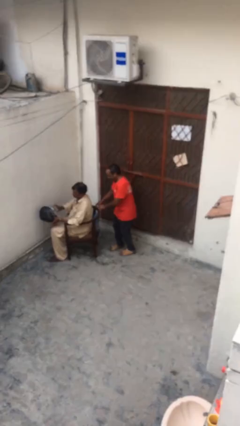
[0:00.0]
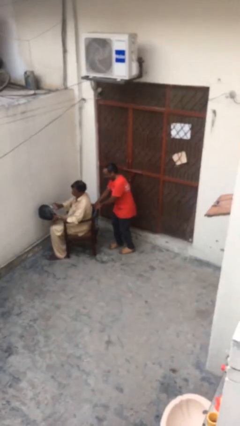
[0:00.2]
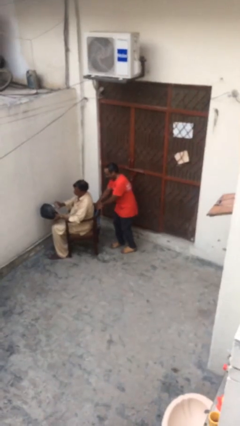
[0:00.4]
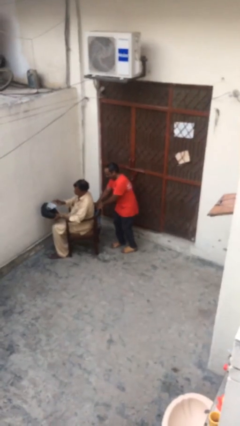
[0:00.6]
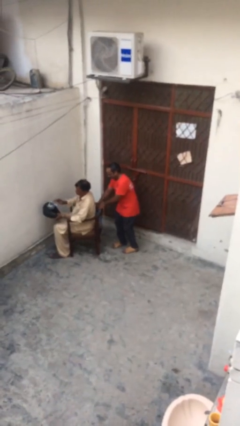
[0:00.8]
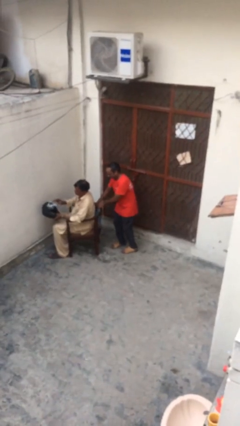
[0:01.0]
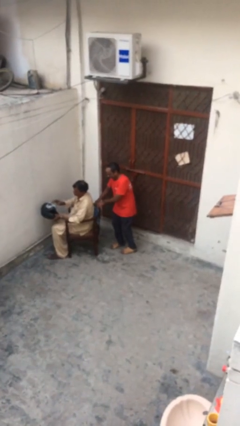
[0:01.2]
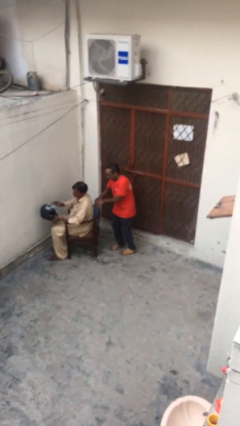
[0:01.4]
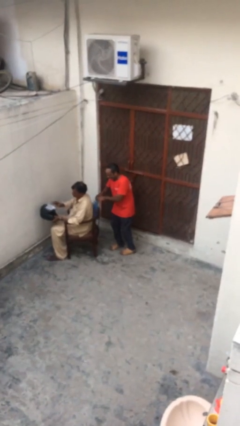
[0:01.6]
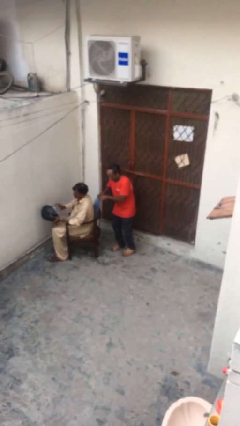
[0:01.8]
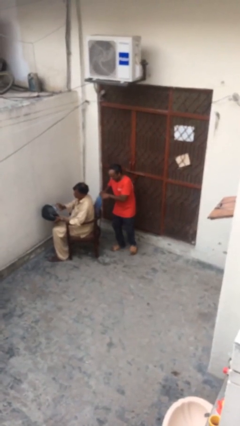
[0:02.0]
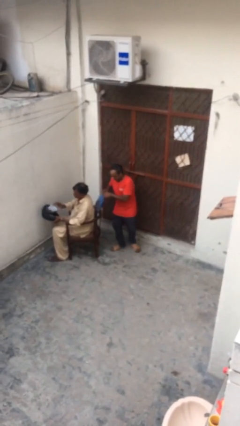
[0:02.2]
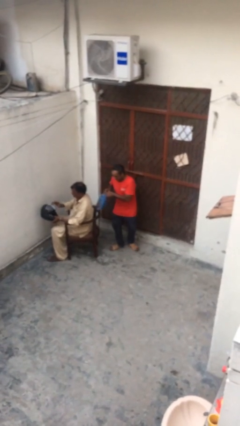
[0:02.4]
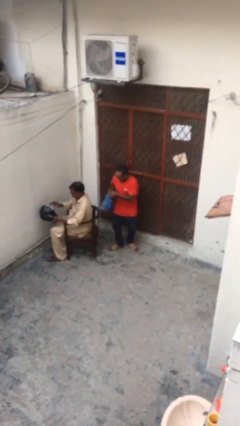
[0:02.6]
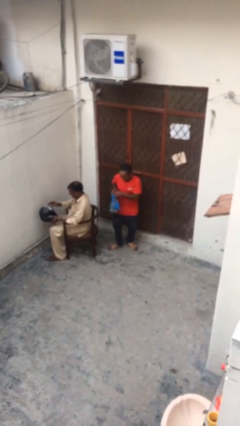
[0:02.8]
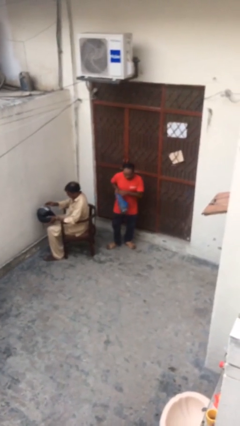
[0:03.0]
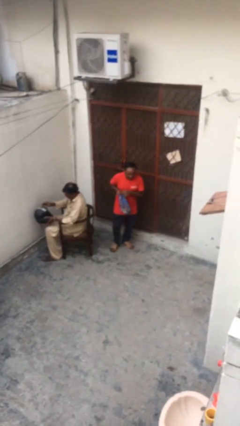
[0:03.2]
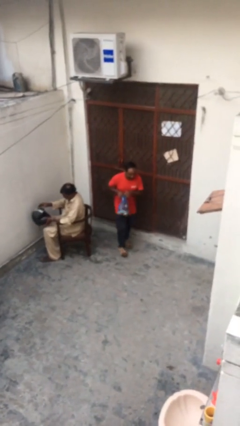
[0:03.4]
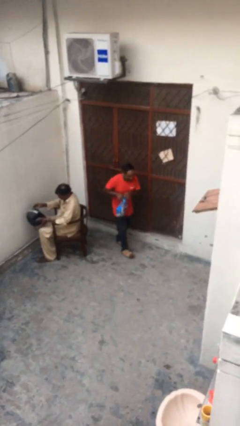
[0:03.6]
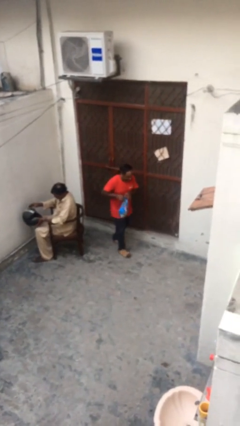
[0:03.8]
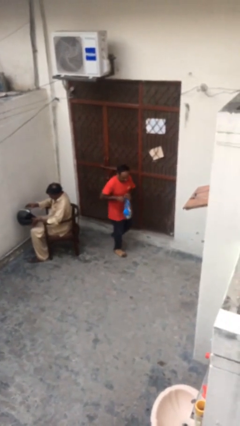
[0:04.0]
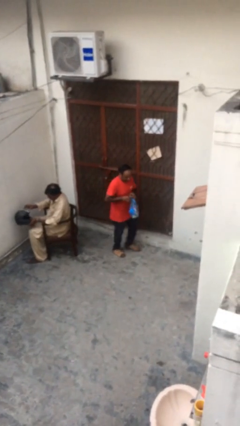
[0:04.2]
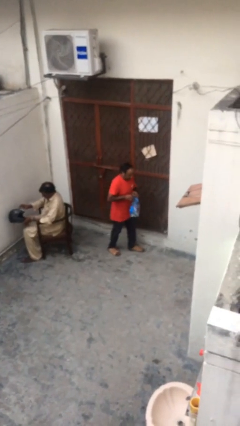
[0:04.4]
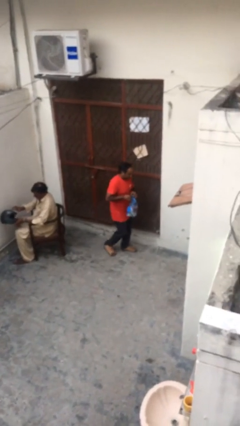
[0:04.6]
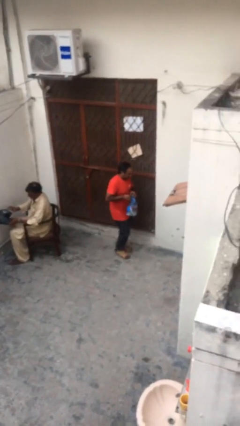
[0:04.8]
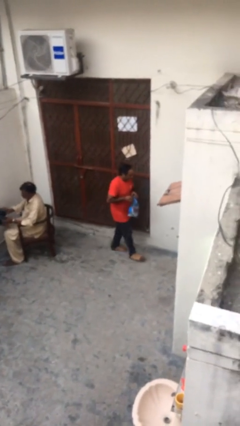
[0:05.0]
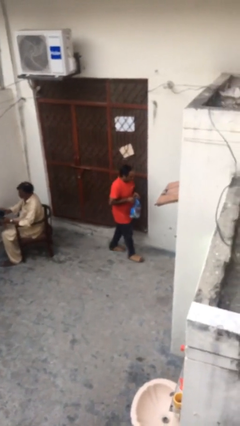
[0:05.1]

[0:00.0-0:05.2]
person steals object from person

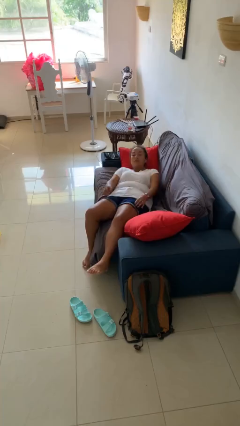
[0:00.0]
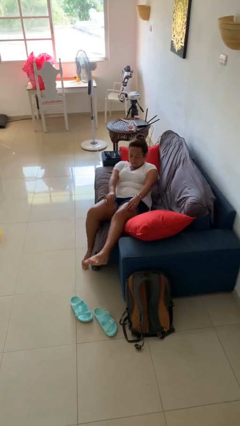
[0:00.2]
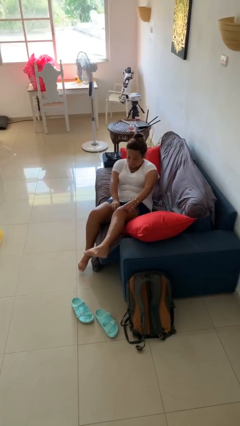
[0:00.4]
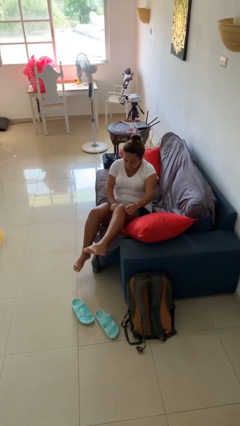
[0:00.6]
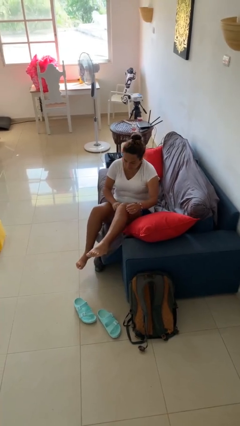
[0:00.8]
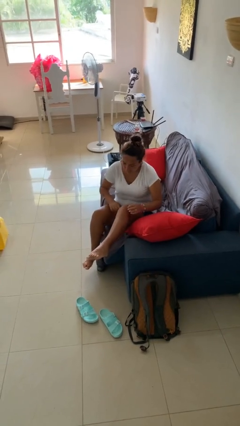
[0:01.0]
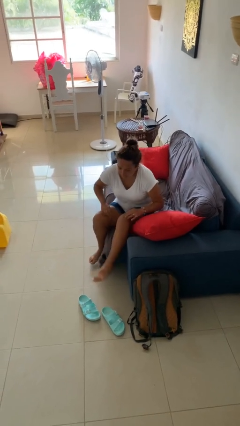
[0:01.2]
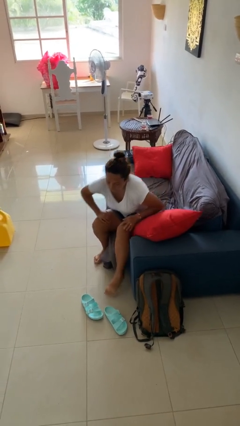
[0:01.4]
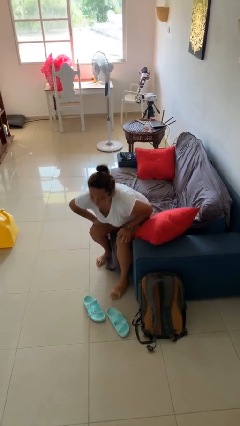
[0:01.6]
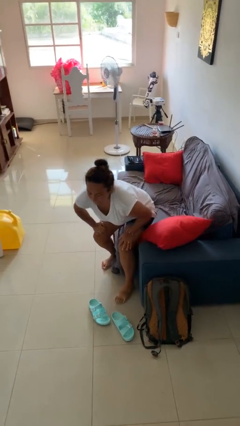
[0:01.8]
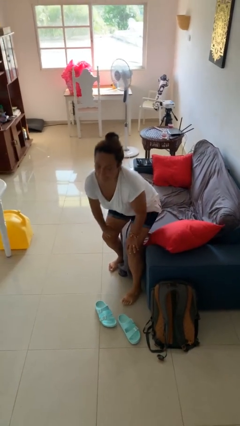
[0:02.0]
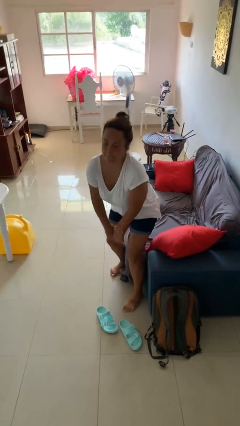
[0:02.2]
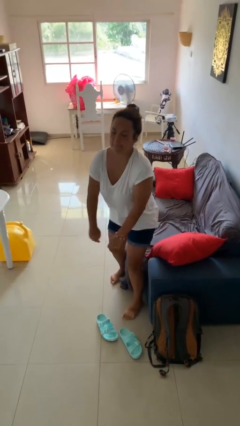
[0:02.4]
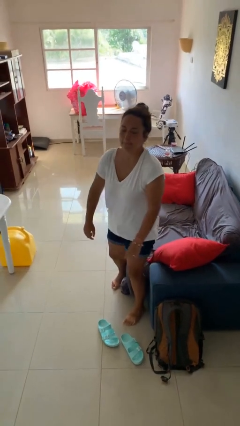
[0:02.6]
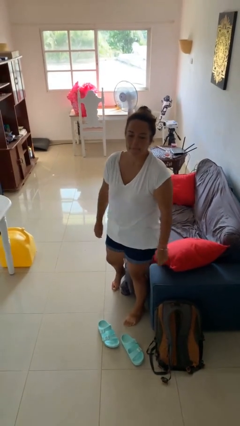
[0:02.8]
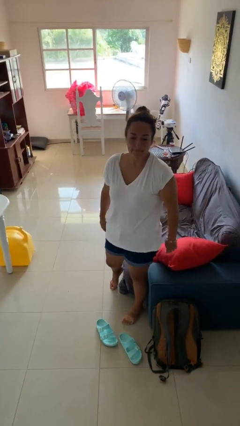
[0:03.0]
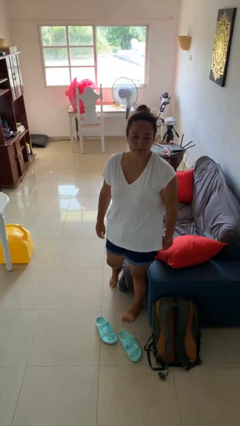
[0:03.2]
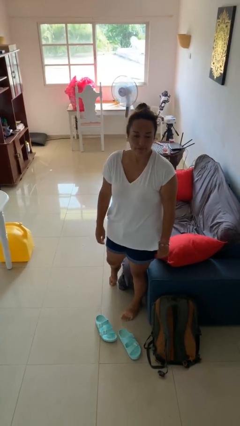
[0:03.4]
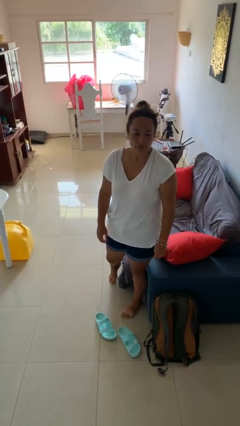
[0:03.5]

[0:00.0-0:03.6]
person stands up

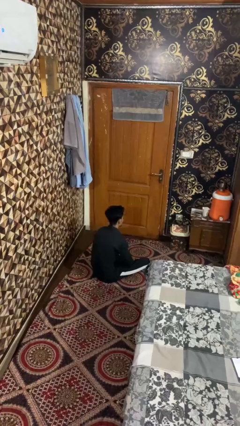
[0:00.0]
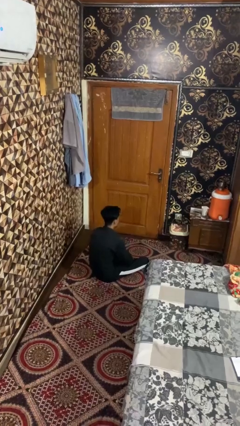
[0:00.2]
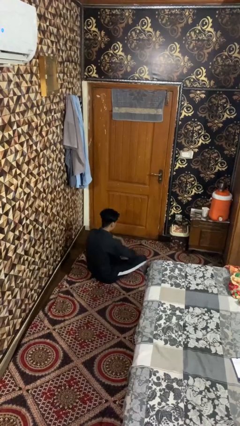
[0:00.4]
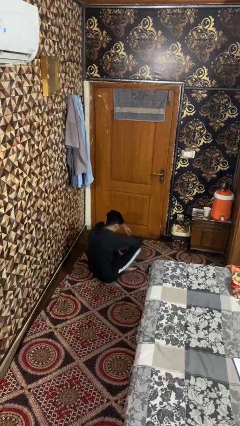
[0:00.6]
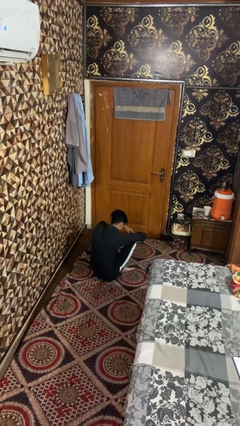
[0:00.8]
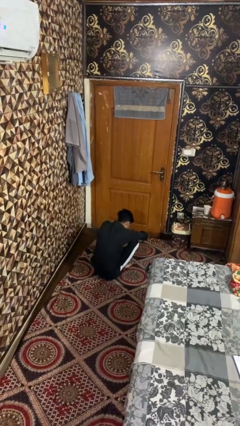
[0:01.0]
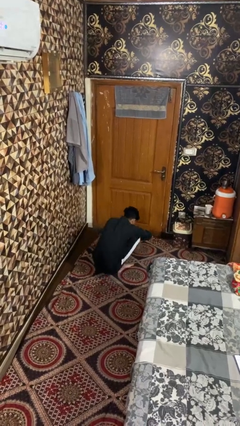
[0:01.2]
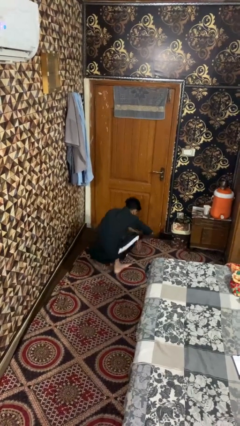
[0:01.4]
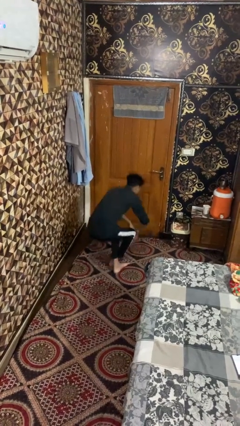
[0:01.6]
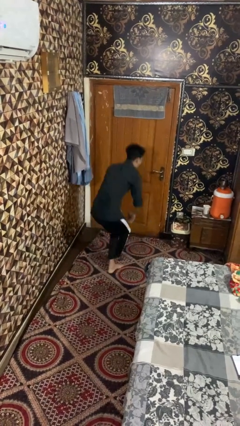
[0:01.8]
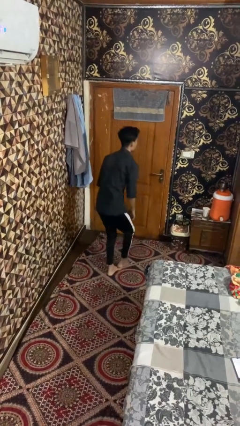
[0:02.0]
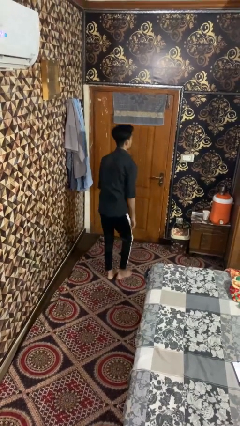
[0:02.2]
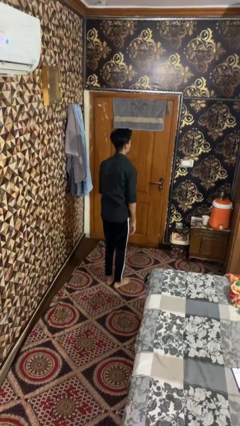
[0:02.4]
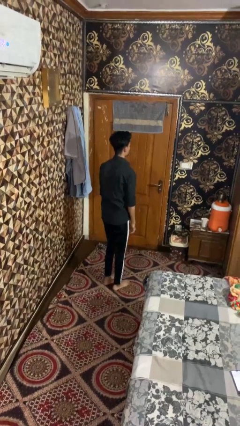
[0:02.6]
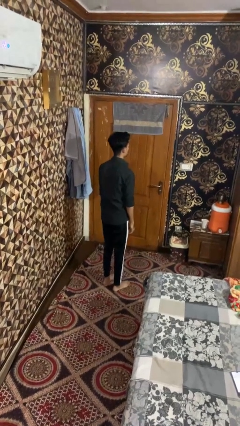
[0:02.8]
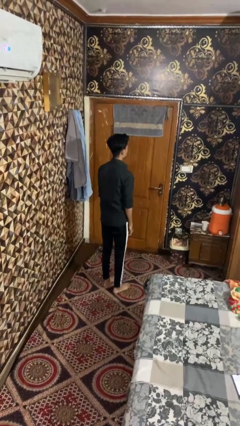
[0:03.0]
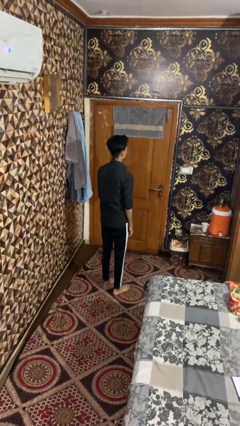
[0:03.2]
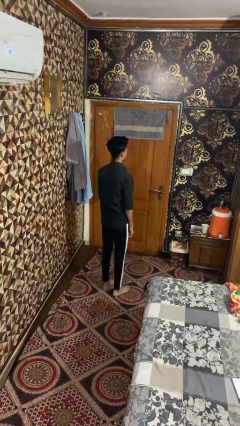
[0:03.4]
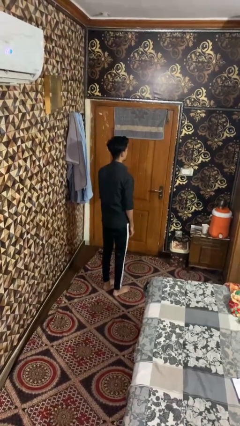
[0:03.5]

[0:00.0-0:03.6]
person stands up from floor

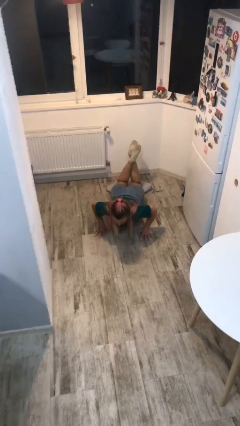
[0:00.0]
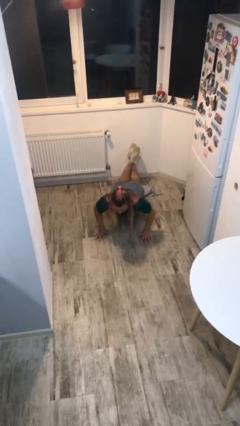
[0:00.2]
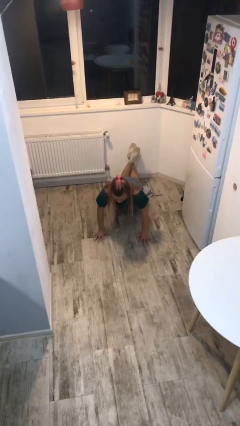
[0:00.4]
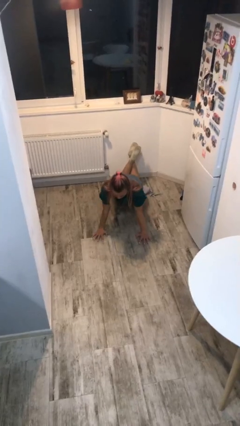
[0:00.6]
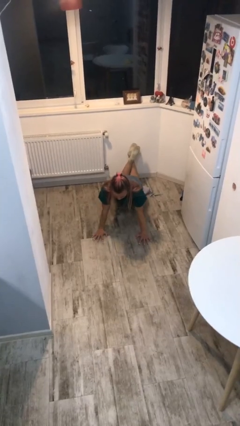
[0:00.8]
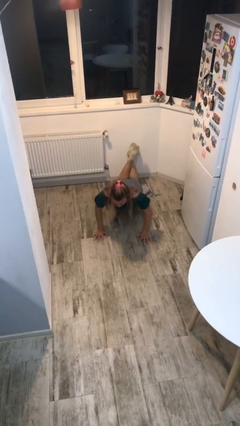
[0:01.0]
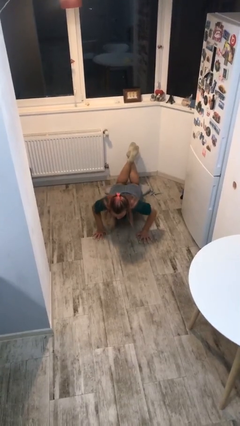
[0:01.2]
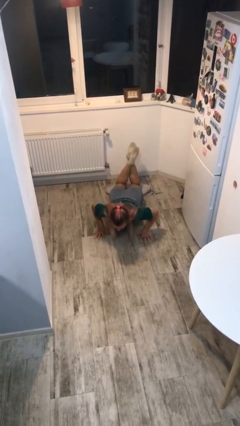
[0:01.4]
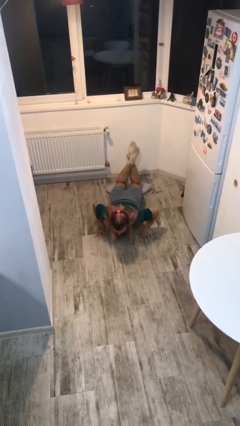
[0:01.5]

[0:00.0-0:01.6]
person exercises with pushup

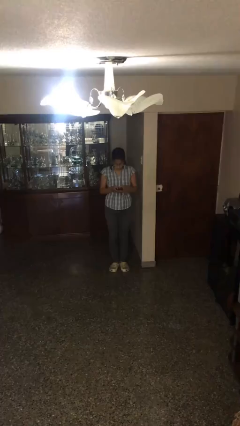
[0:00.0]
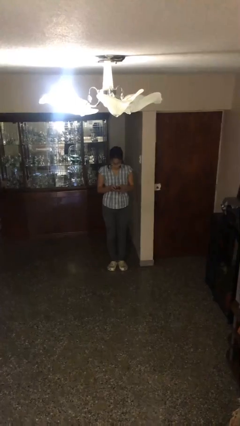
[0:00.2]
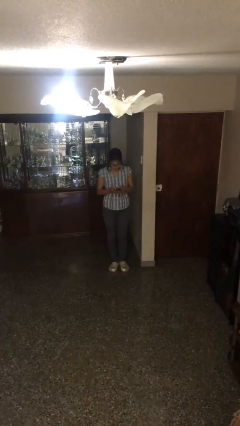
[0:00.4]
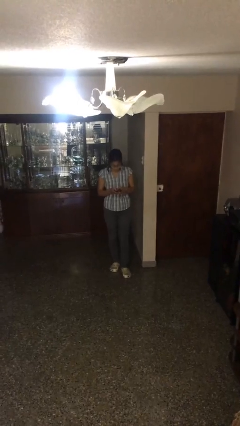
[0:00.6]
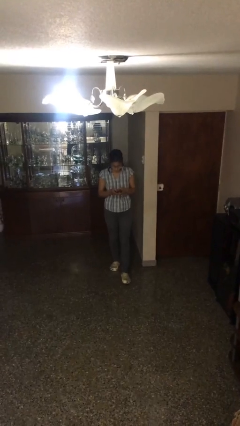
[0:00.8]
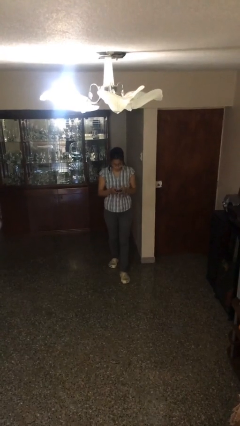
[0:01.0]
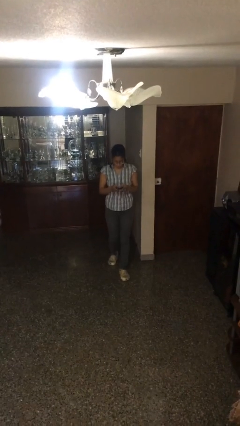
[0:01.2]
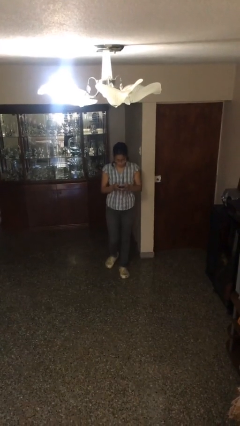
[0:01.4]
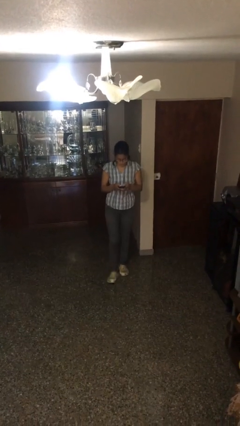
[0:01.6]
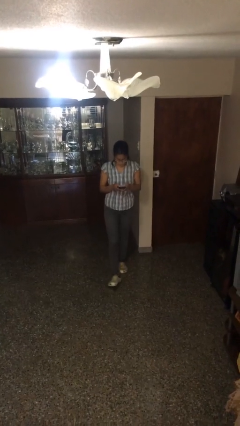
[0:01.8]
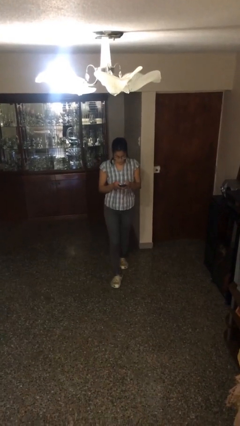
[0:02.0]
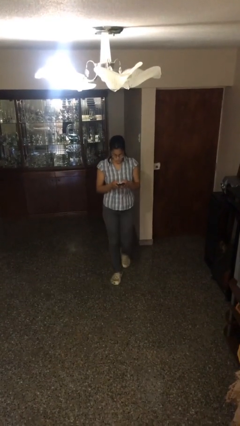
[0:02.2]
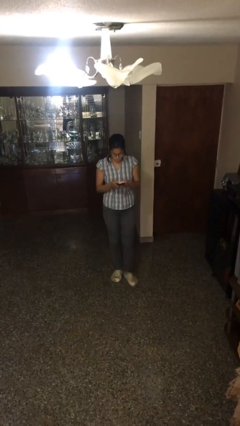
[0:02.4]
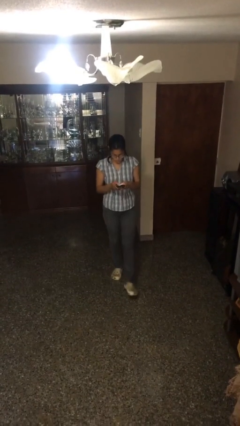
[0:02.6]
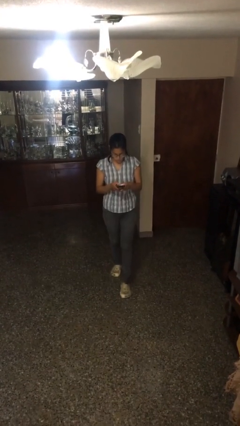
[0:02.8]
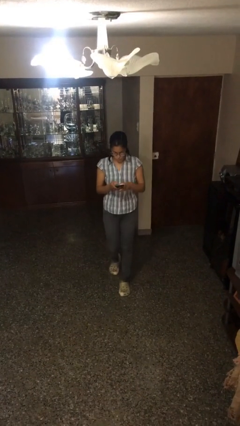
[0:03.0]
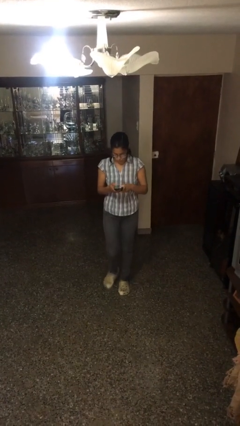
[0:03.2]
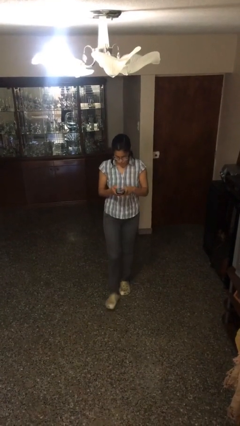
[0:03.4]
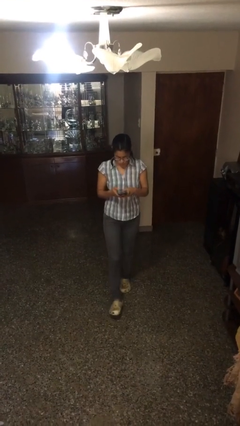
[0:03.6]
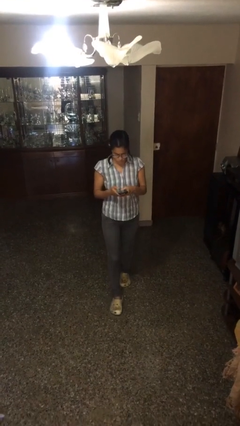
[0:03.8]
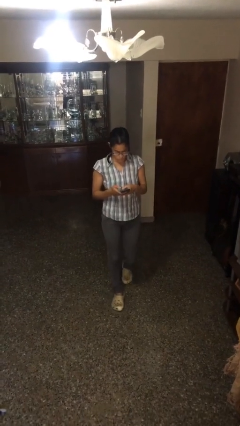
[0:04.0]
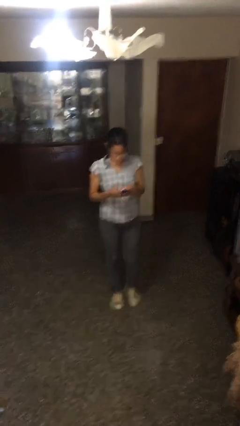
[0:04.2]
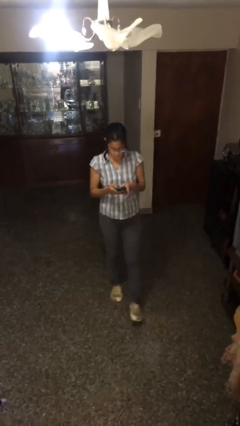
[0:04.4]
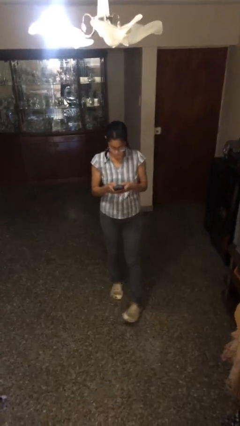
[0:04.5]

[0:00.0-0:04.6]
person texts on phone
